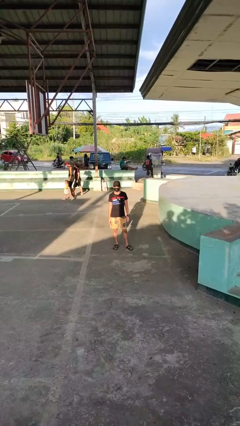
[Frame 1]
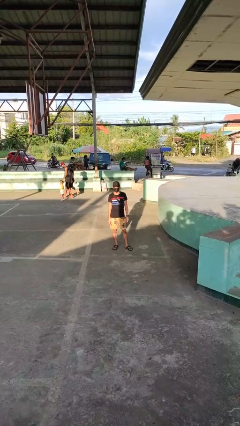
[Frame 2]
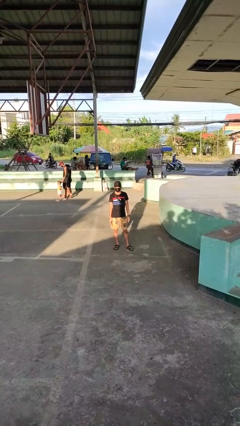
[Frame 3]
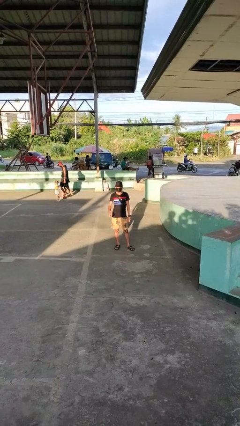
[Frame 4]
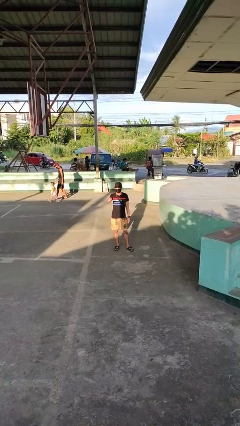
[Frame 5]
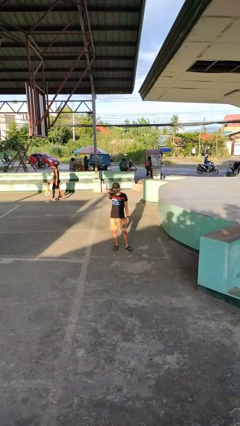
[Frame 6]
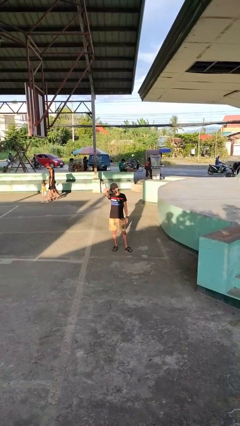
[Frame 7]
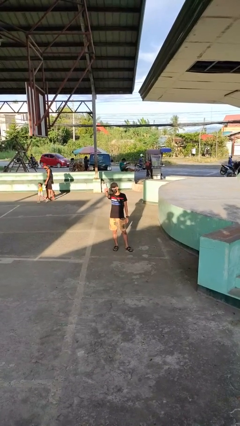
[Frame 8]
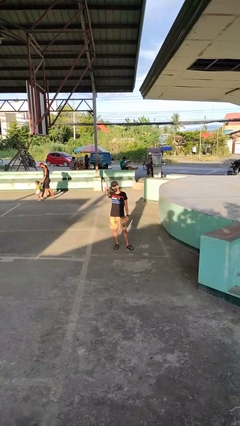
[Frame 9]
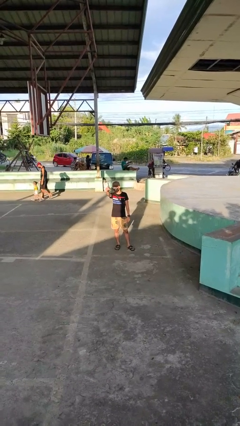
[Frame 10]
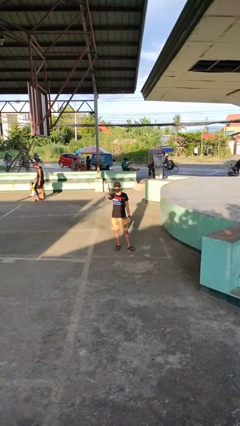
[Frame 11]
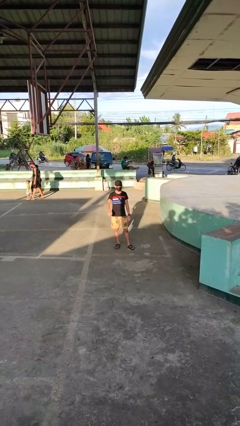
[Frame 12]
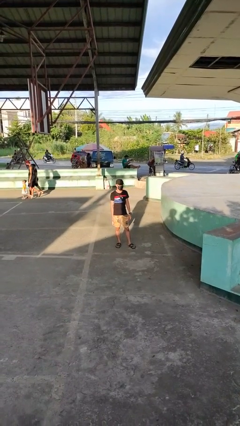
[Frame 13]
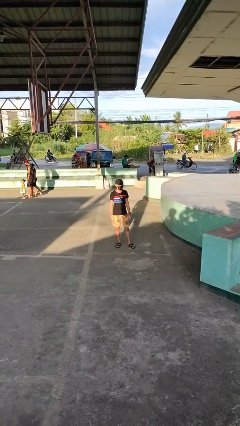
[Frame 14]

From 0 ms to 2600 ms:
person points at person

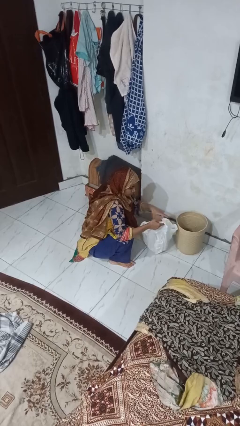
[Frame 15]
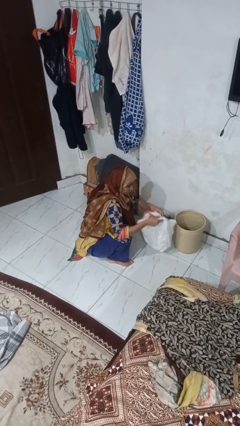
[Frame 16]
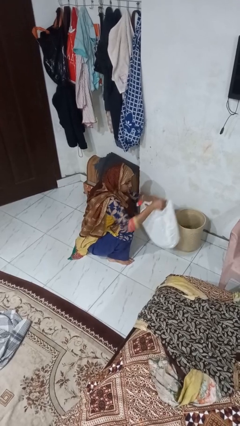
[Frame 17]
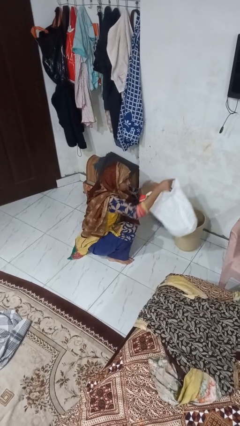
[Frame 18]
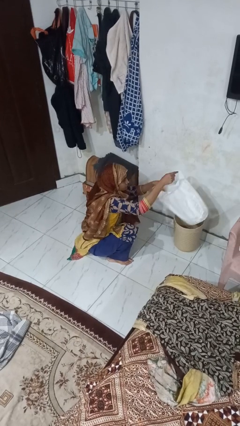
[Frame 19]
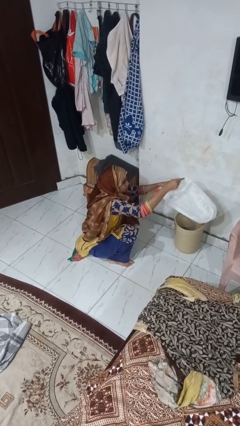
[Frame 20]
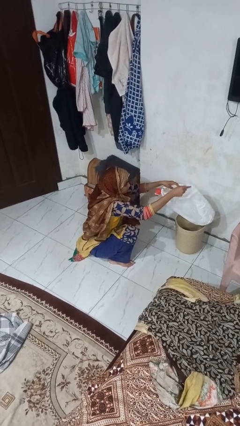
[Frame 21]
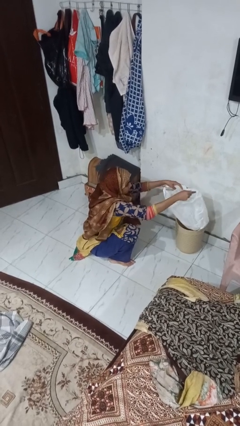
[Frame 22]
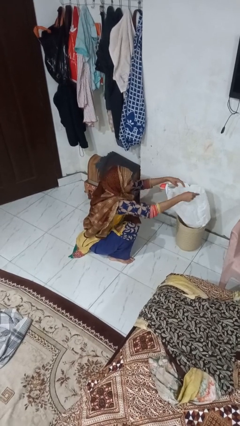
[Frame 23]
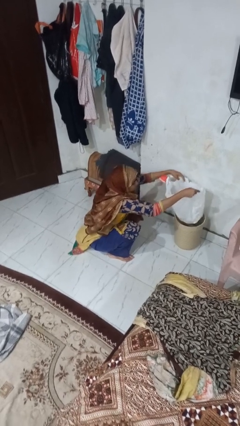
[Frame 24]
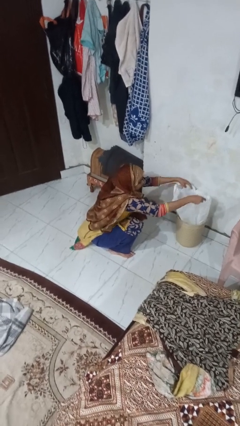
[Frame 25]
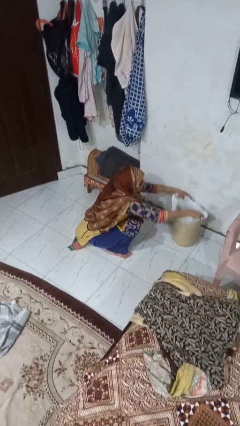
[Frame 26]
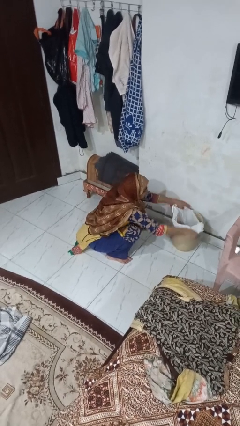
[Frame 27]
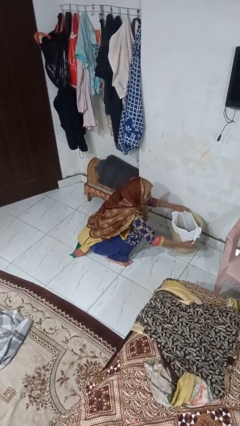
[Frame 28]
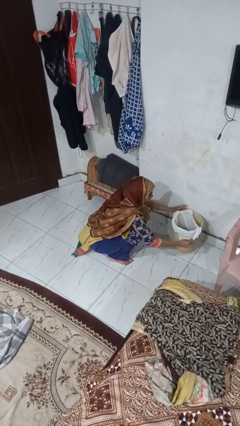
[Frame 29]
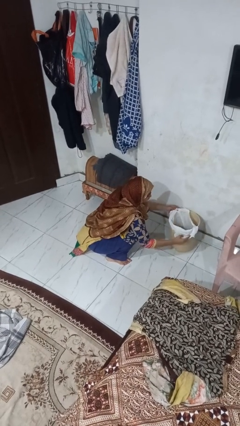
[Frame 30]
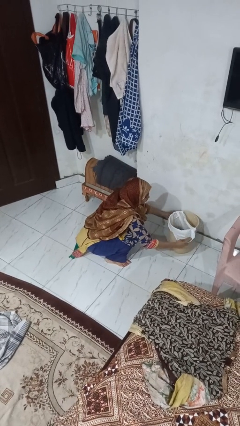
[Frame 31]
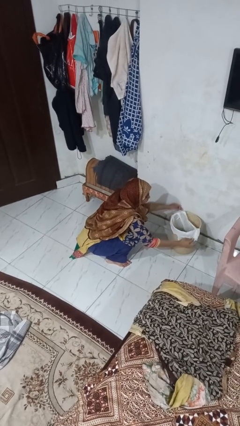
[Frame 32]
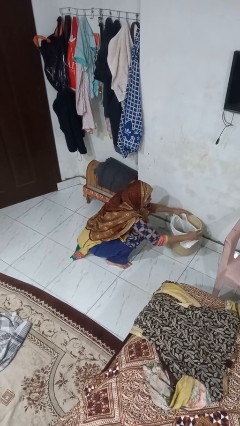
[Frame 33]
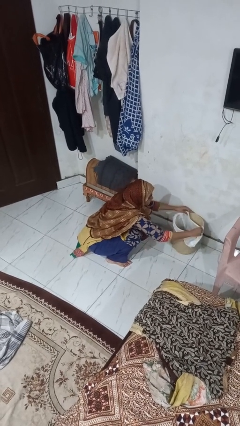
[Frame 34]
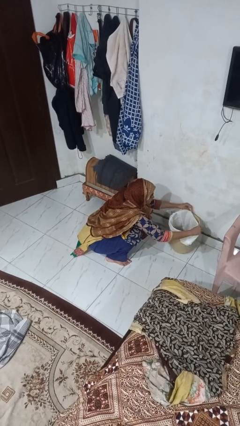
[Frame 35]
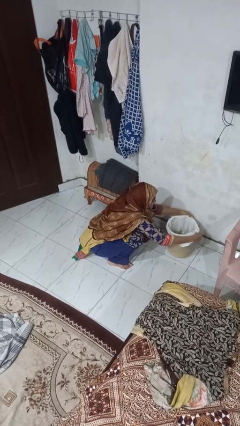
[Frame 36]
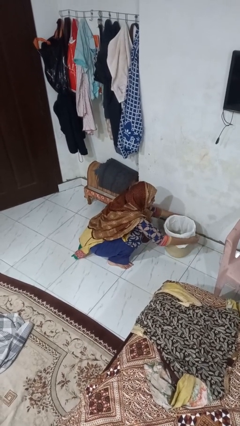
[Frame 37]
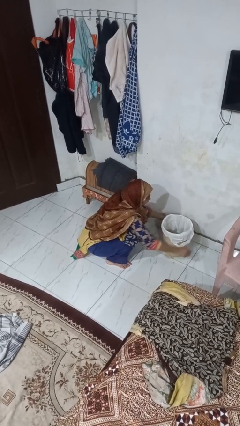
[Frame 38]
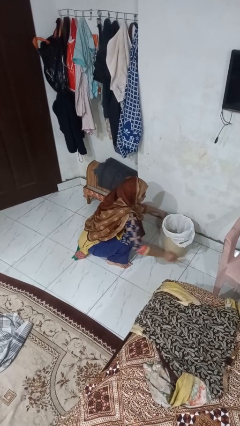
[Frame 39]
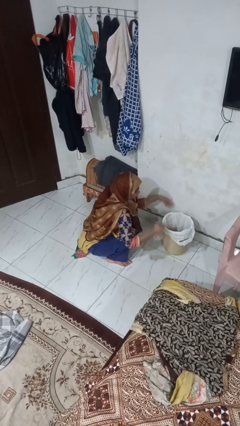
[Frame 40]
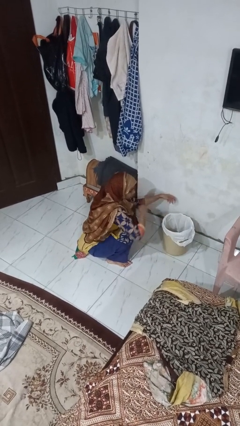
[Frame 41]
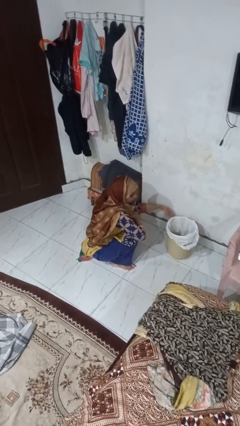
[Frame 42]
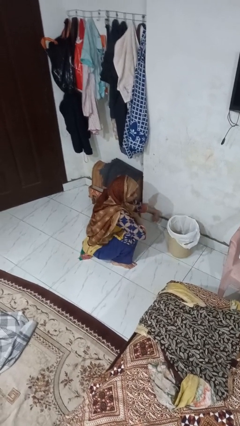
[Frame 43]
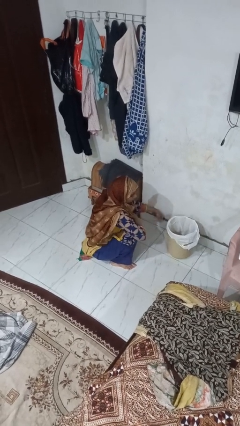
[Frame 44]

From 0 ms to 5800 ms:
person inserts trashbag into trashcan

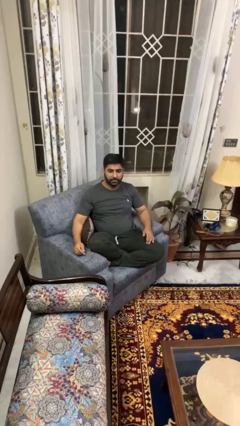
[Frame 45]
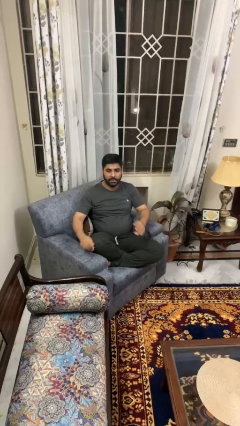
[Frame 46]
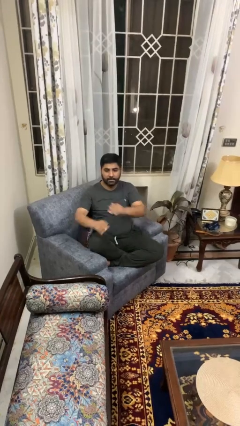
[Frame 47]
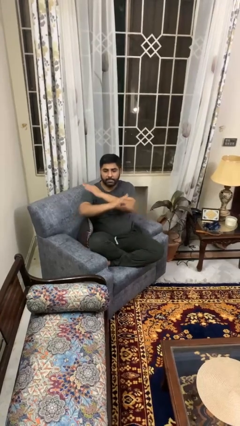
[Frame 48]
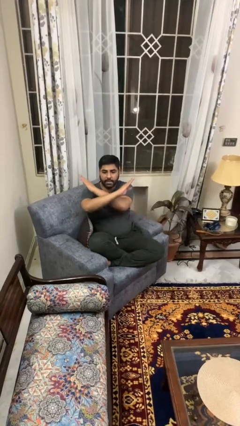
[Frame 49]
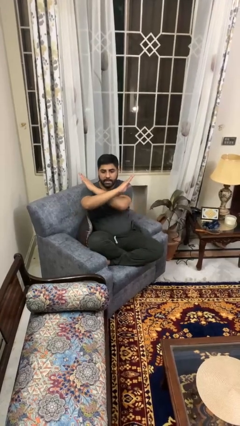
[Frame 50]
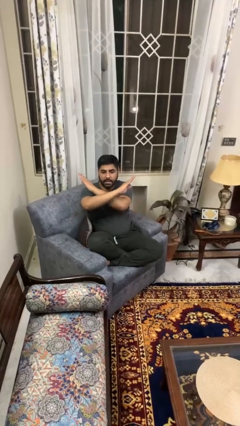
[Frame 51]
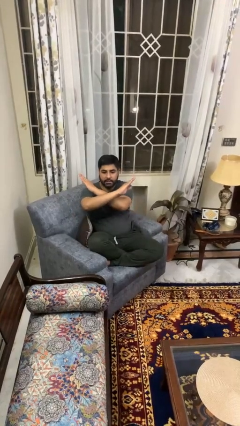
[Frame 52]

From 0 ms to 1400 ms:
person gestures arms x

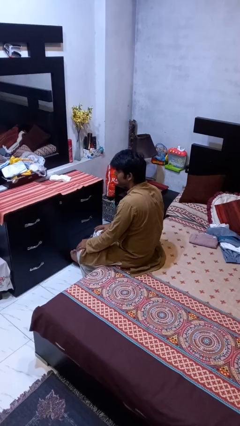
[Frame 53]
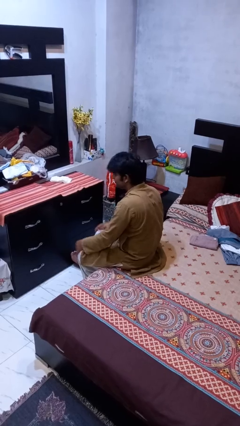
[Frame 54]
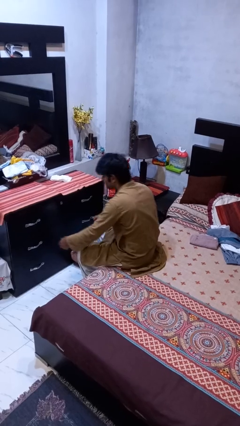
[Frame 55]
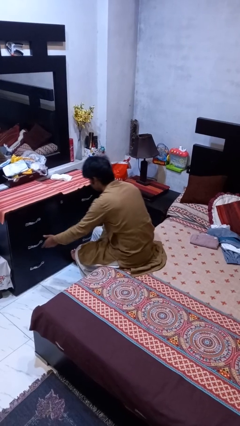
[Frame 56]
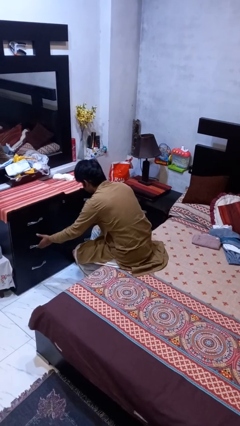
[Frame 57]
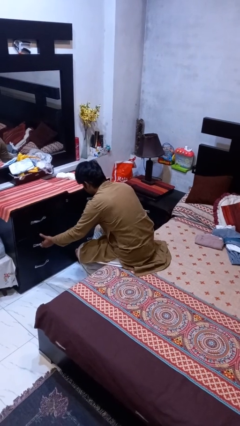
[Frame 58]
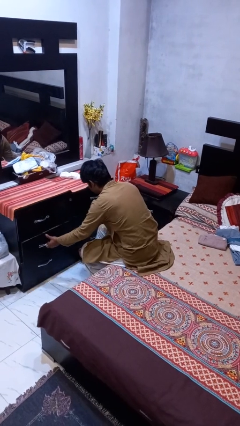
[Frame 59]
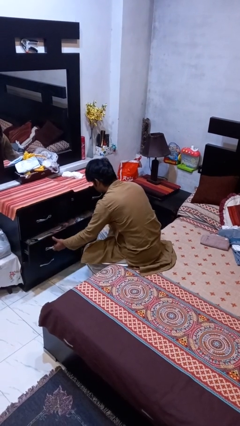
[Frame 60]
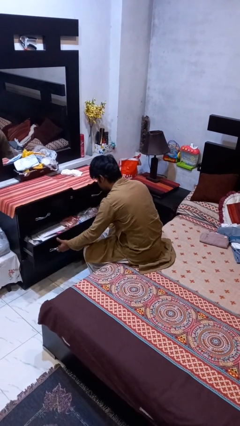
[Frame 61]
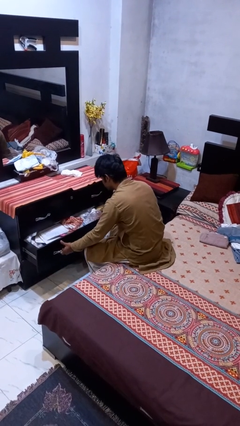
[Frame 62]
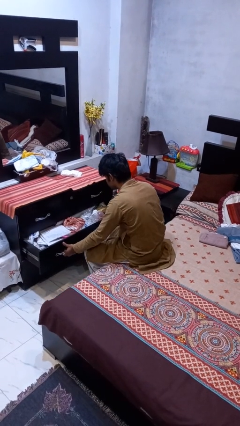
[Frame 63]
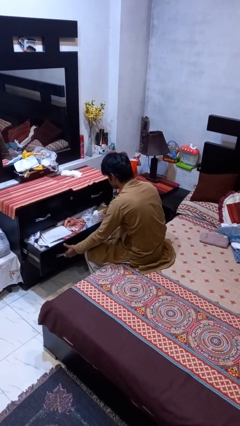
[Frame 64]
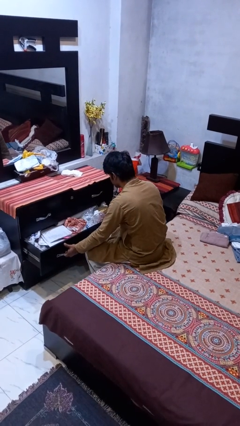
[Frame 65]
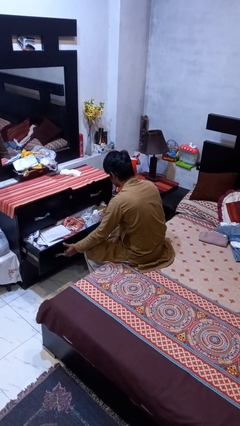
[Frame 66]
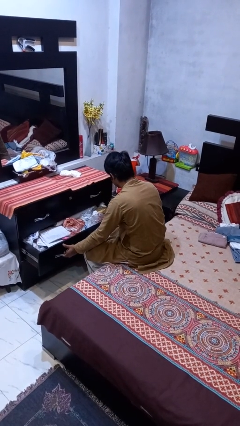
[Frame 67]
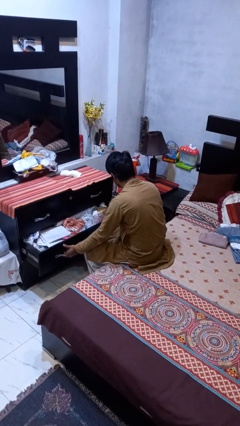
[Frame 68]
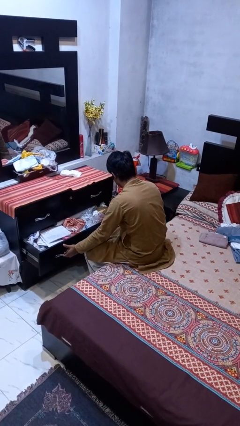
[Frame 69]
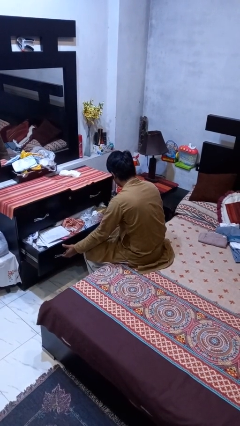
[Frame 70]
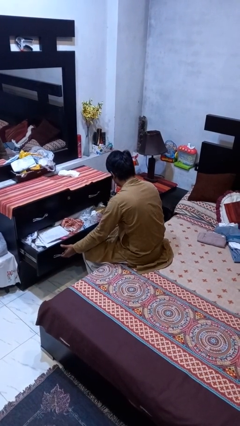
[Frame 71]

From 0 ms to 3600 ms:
person opens dresser drawer

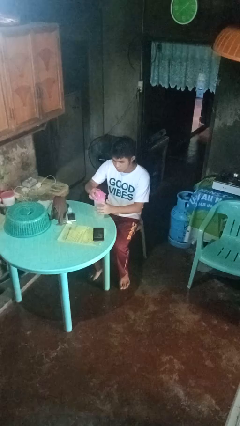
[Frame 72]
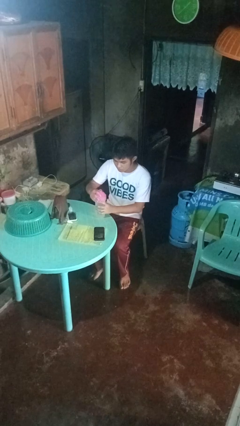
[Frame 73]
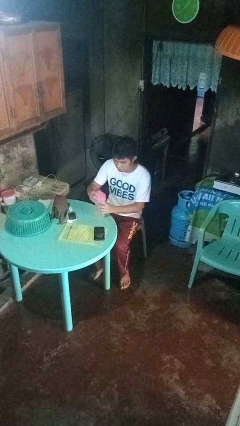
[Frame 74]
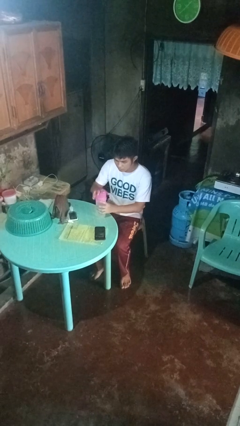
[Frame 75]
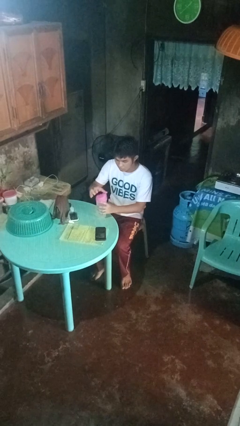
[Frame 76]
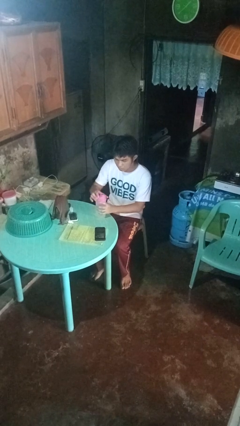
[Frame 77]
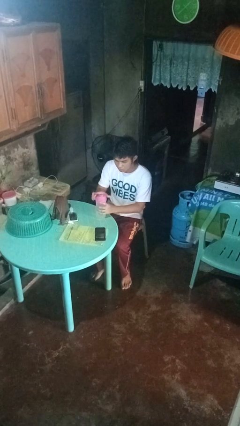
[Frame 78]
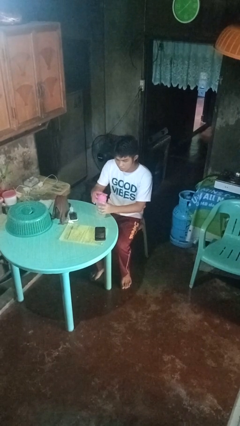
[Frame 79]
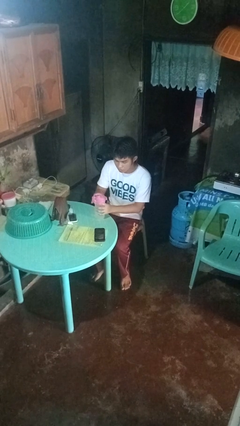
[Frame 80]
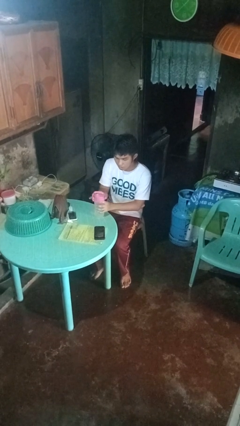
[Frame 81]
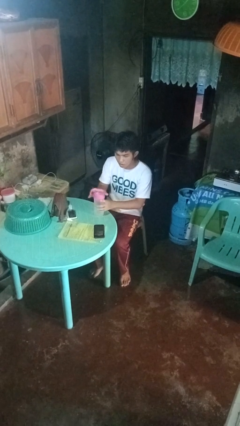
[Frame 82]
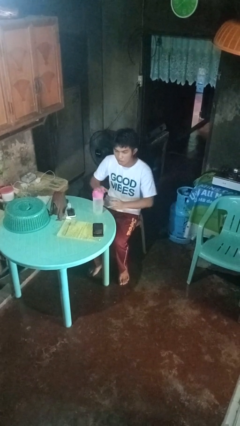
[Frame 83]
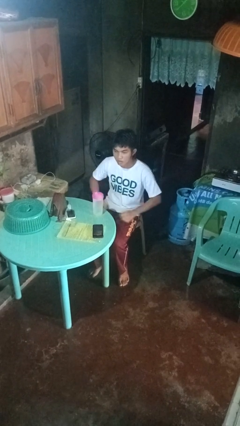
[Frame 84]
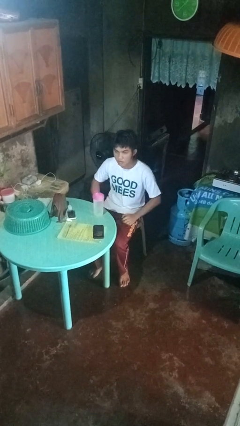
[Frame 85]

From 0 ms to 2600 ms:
person screws lid to bottle

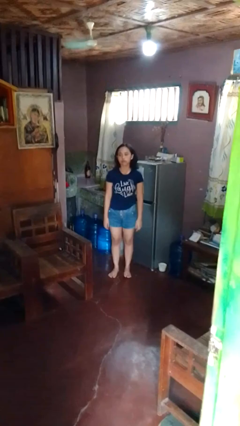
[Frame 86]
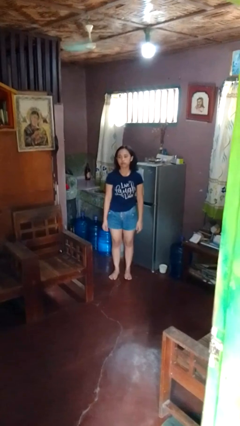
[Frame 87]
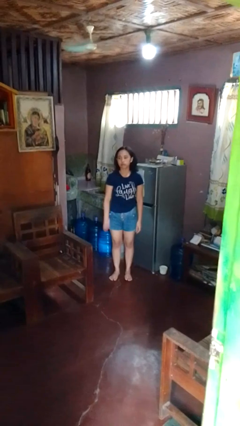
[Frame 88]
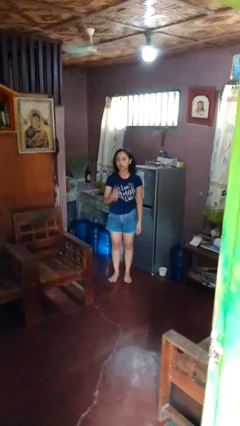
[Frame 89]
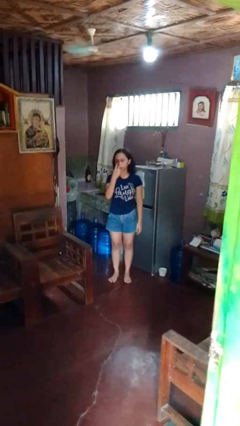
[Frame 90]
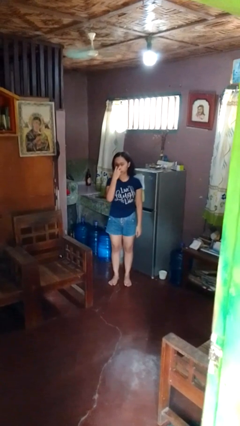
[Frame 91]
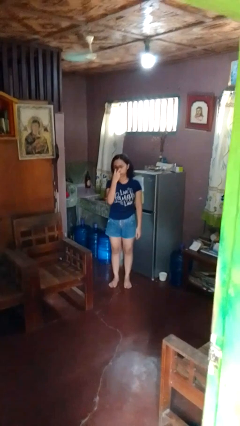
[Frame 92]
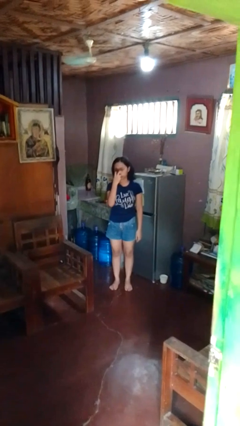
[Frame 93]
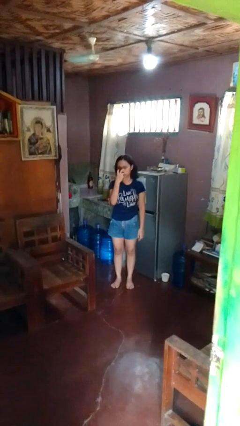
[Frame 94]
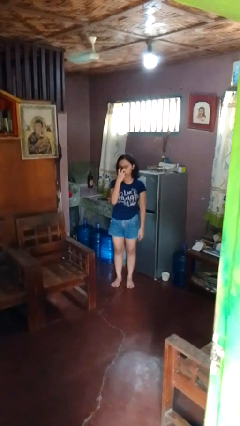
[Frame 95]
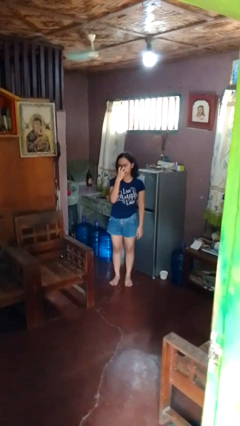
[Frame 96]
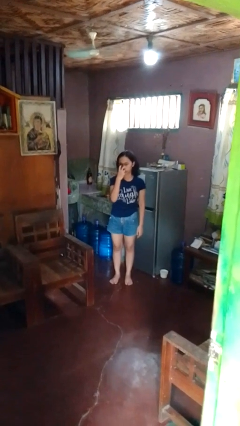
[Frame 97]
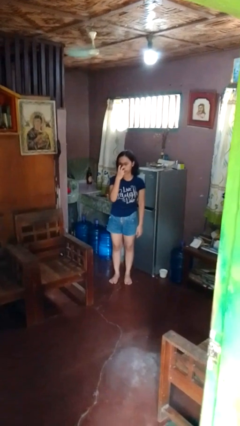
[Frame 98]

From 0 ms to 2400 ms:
person gestures watch closely
